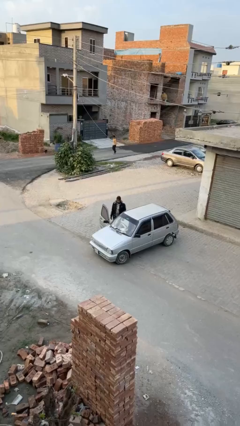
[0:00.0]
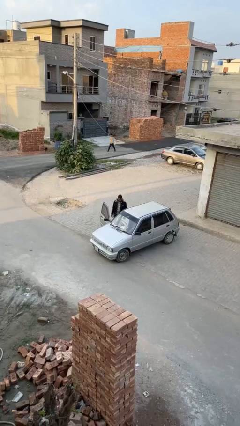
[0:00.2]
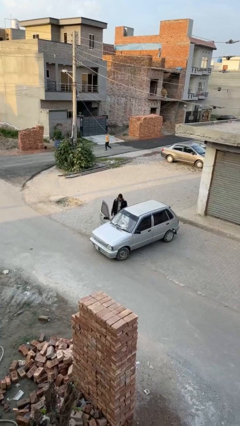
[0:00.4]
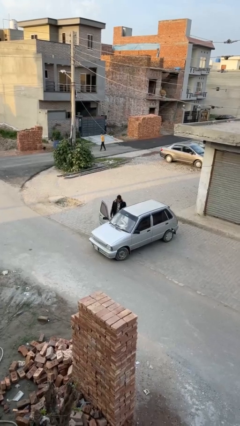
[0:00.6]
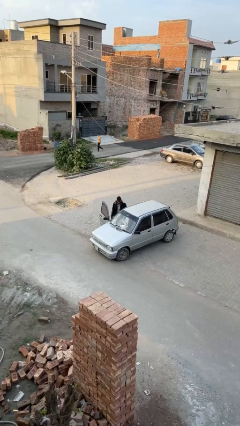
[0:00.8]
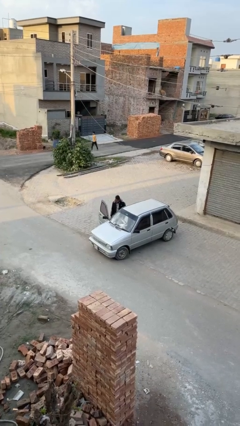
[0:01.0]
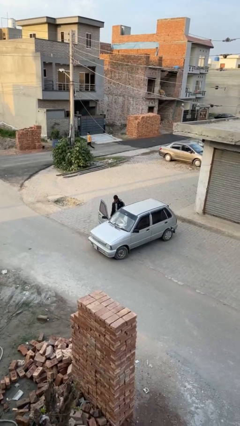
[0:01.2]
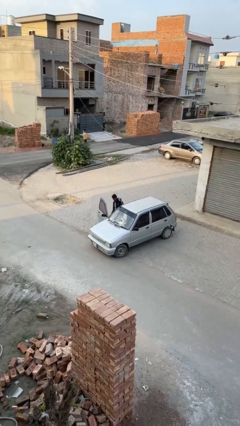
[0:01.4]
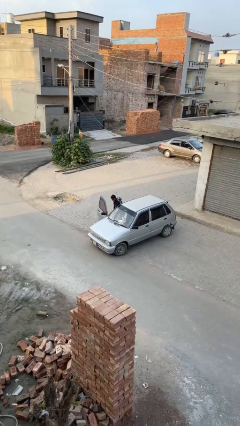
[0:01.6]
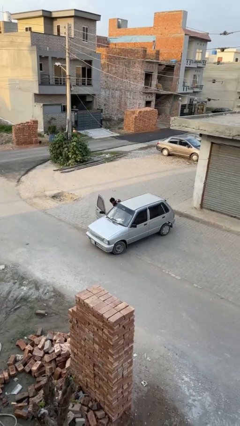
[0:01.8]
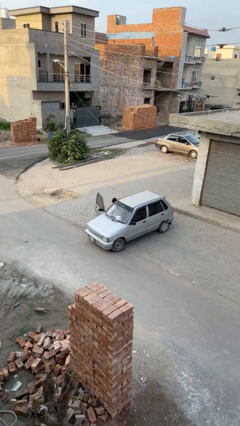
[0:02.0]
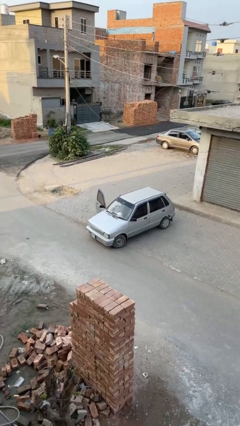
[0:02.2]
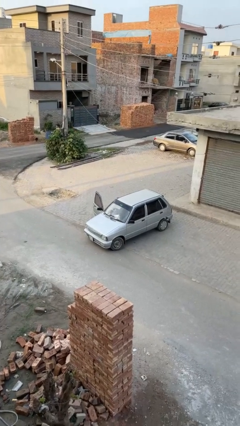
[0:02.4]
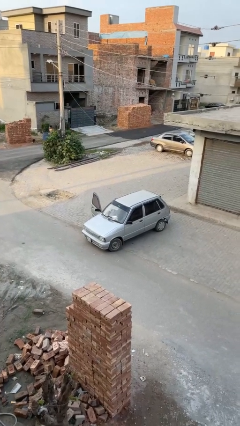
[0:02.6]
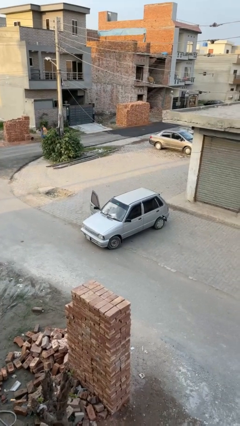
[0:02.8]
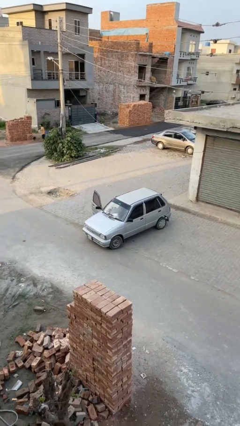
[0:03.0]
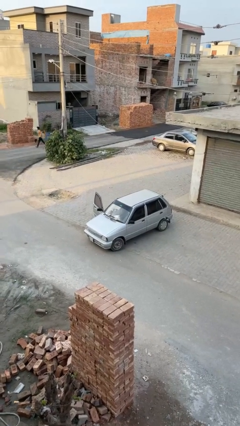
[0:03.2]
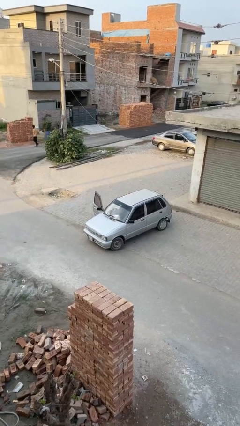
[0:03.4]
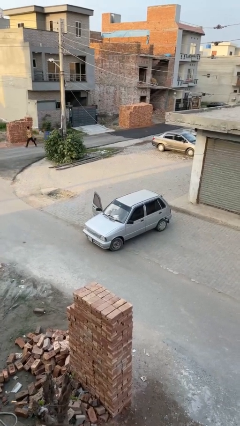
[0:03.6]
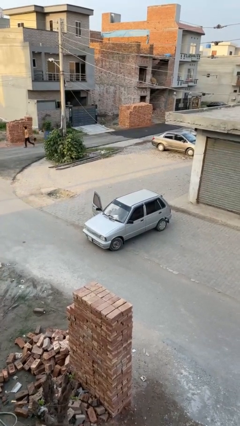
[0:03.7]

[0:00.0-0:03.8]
person enters car

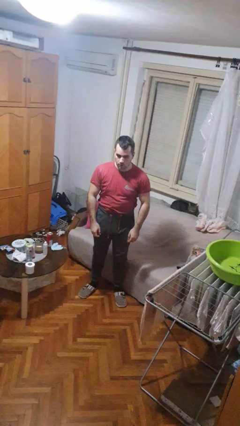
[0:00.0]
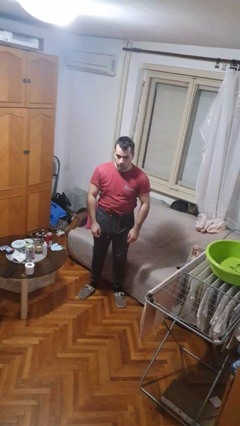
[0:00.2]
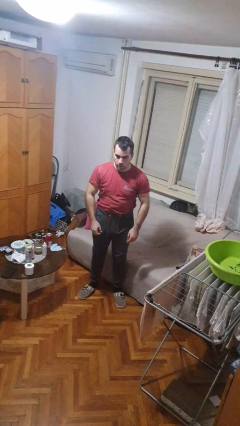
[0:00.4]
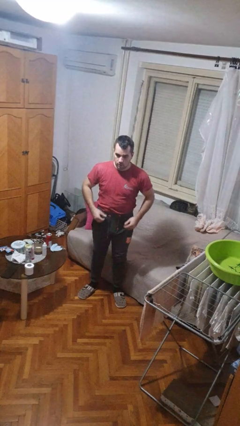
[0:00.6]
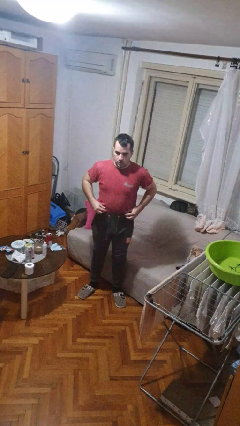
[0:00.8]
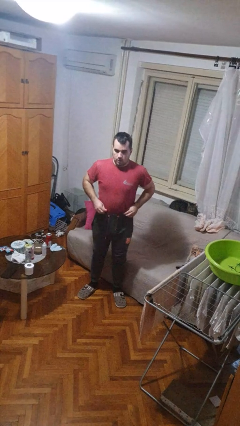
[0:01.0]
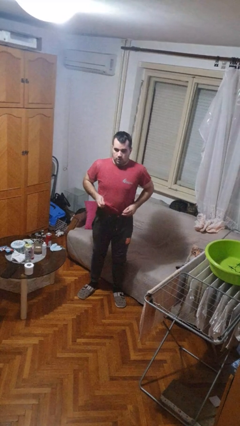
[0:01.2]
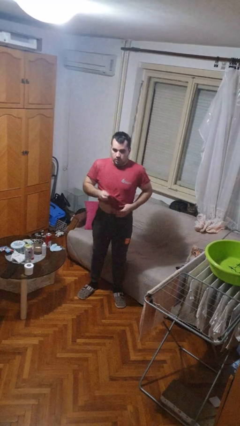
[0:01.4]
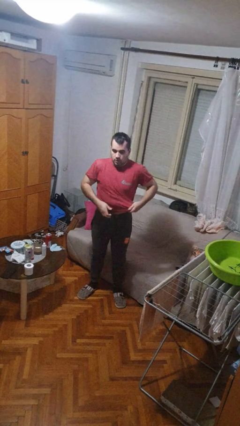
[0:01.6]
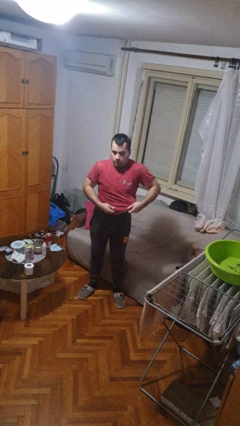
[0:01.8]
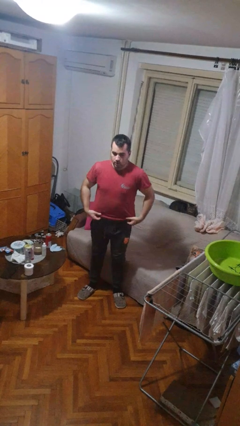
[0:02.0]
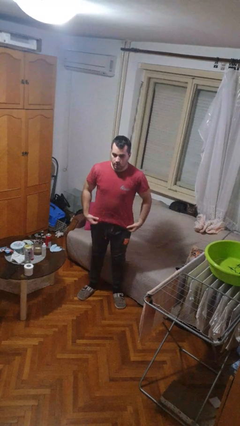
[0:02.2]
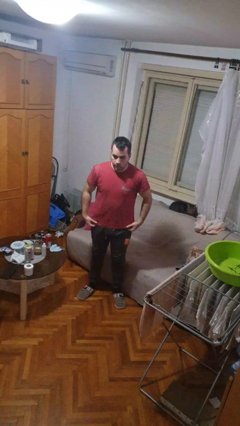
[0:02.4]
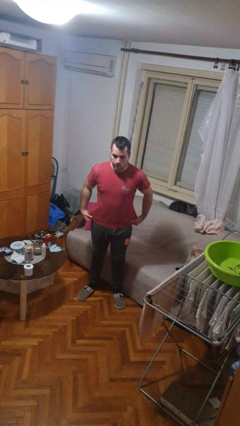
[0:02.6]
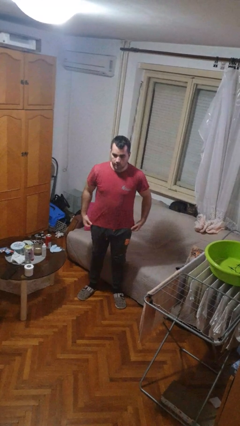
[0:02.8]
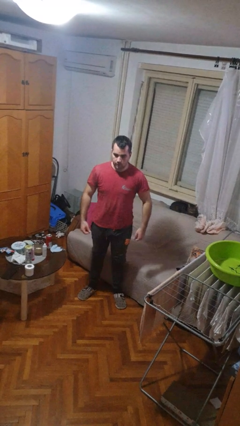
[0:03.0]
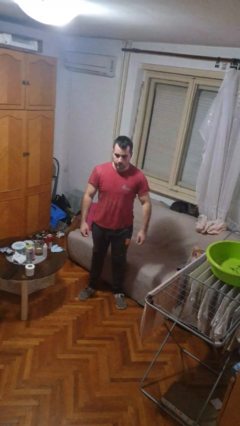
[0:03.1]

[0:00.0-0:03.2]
person untucks shirt

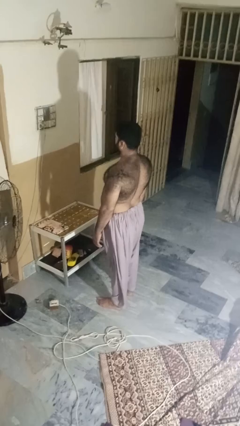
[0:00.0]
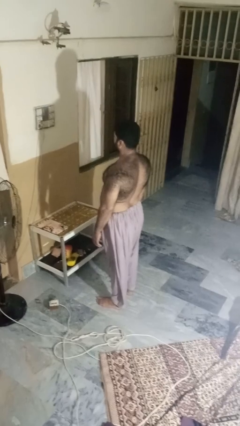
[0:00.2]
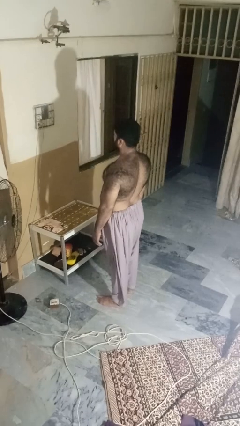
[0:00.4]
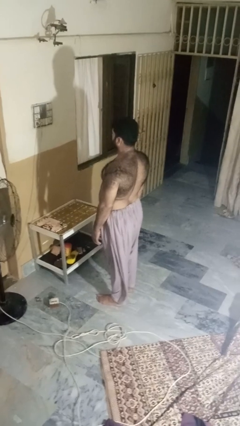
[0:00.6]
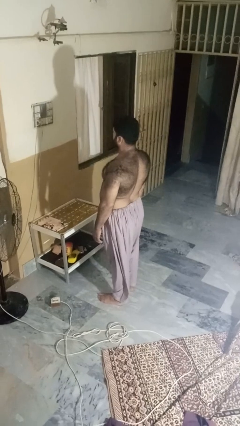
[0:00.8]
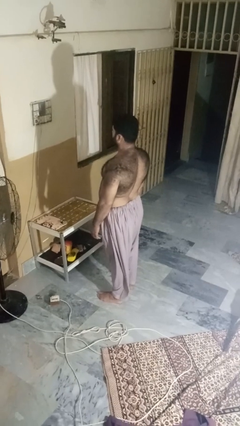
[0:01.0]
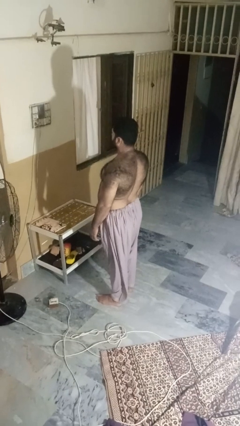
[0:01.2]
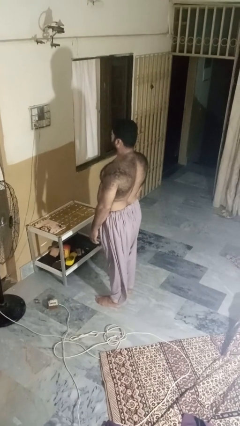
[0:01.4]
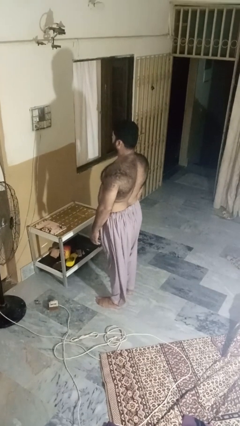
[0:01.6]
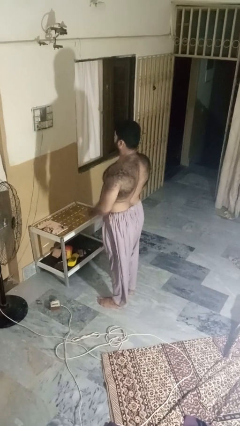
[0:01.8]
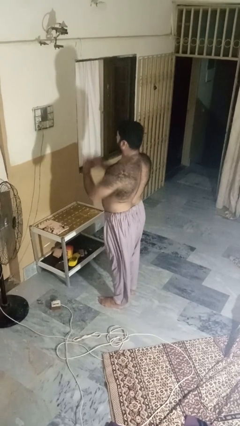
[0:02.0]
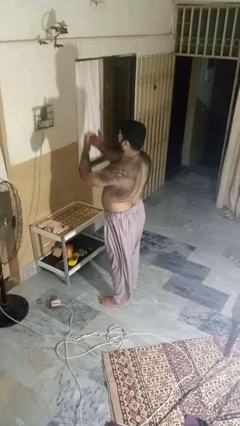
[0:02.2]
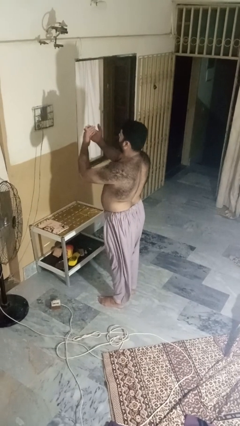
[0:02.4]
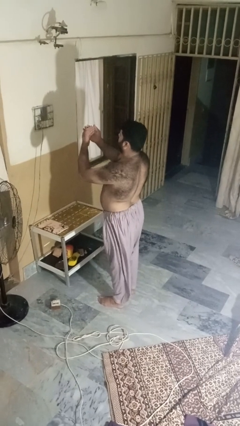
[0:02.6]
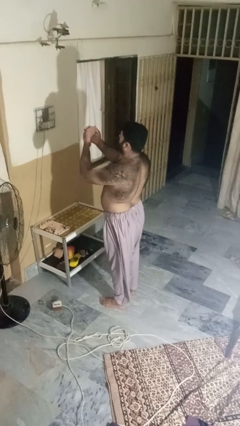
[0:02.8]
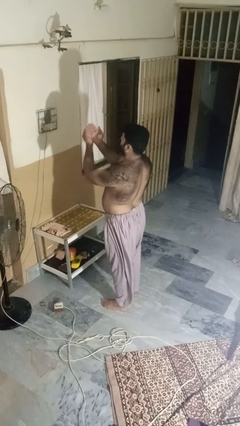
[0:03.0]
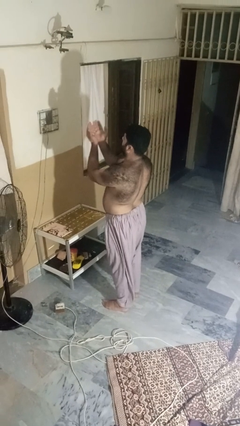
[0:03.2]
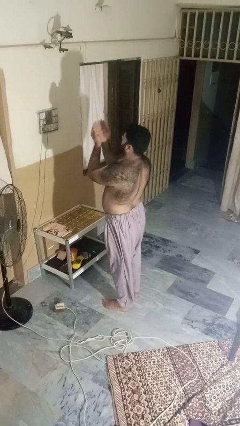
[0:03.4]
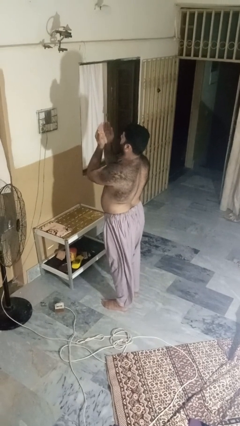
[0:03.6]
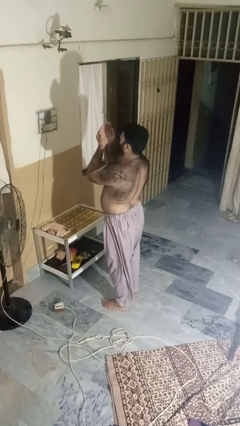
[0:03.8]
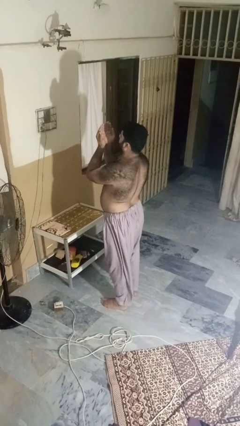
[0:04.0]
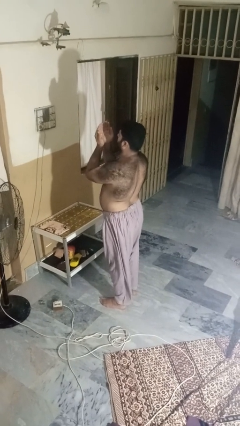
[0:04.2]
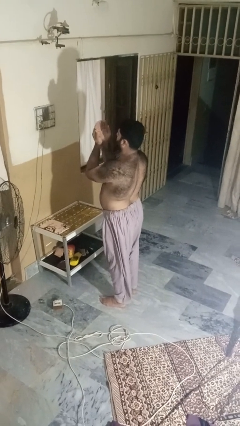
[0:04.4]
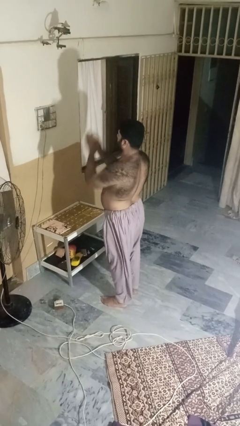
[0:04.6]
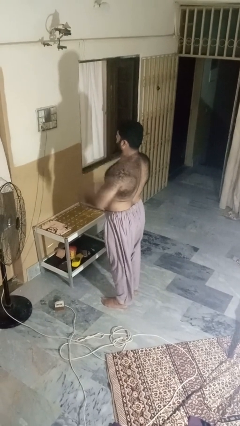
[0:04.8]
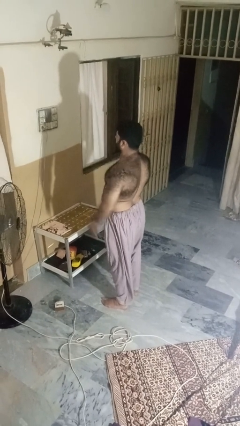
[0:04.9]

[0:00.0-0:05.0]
person prays

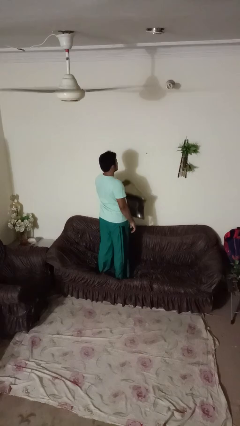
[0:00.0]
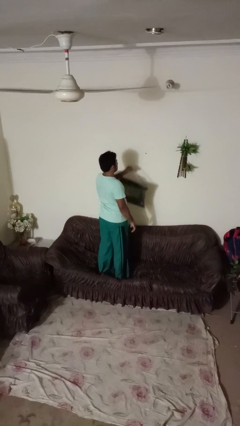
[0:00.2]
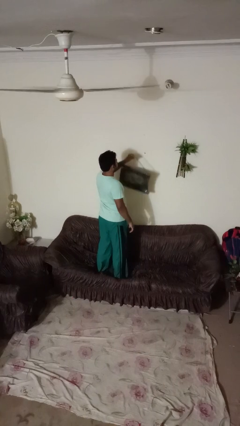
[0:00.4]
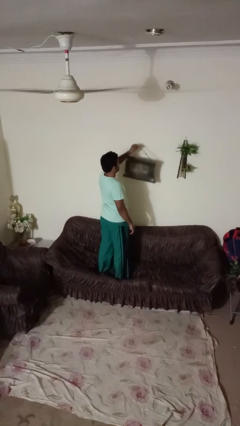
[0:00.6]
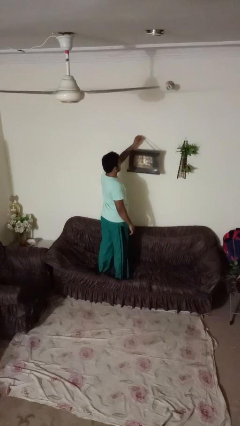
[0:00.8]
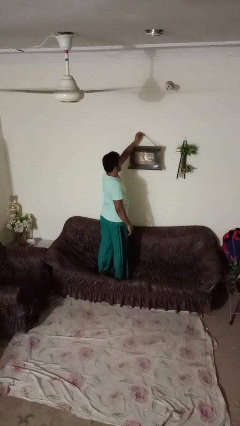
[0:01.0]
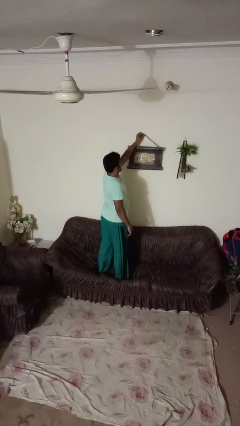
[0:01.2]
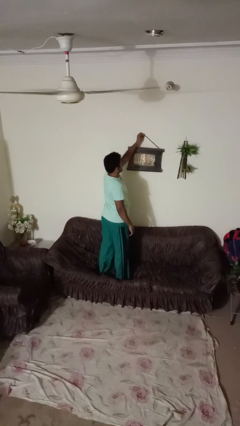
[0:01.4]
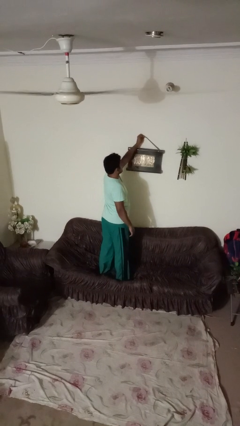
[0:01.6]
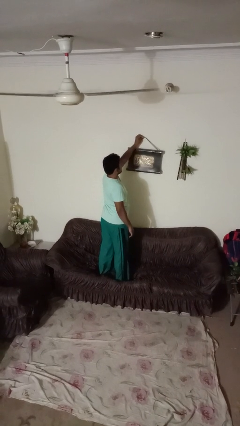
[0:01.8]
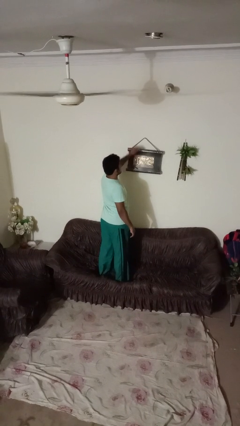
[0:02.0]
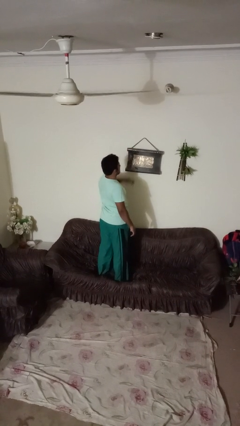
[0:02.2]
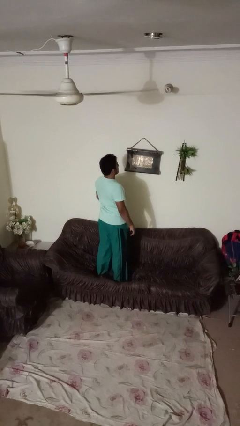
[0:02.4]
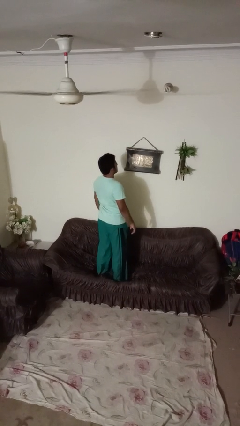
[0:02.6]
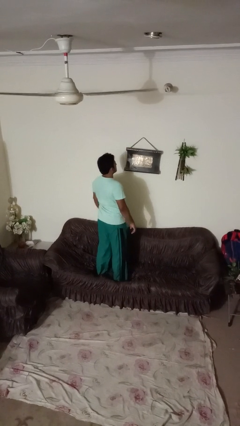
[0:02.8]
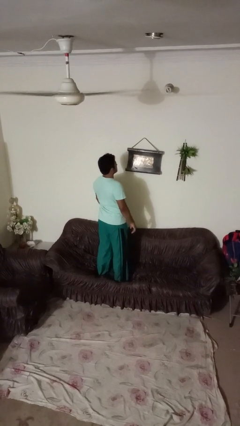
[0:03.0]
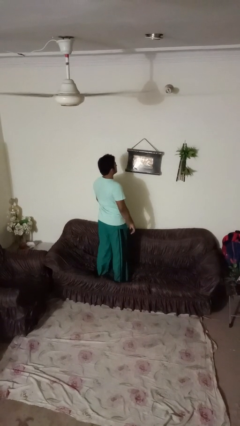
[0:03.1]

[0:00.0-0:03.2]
person puts up picture frame

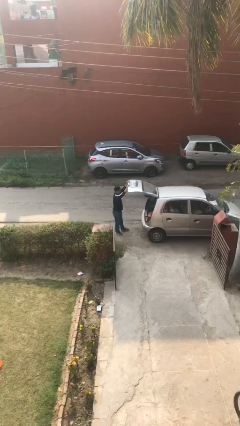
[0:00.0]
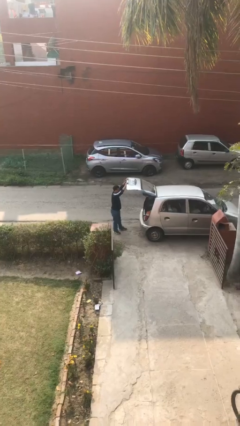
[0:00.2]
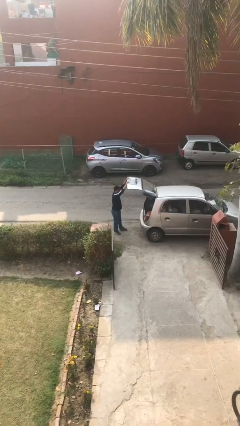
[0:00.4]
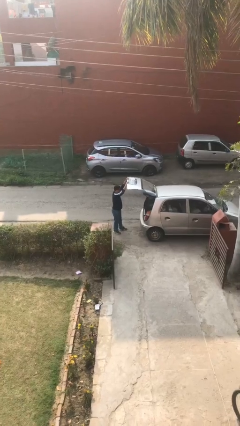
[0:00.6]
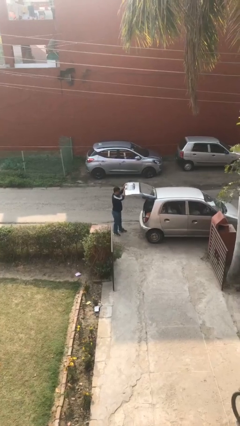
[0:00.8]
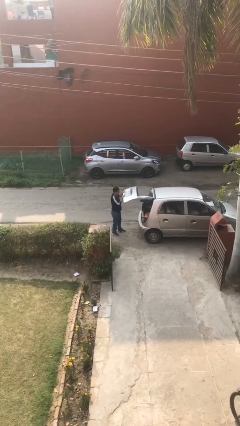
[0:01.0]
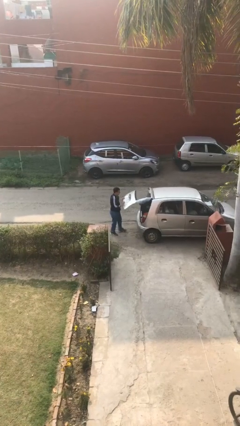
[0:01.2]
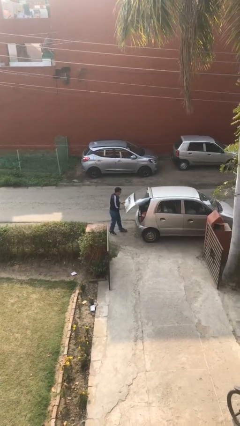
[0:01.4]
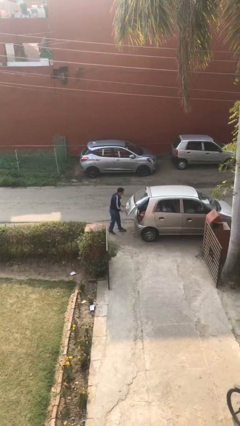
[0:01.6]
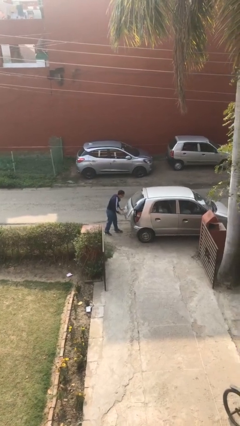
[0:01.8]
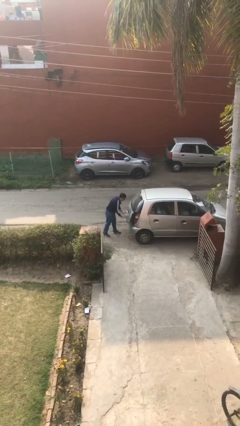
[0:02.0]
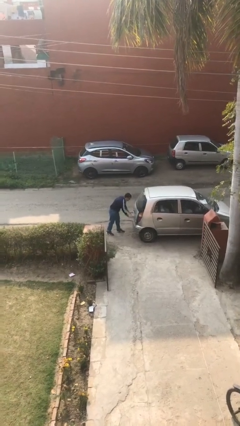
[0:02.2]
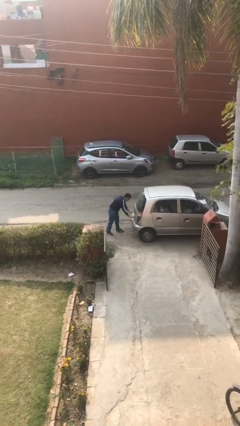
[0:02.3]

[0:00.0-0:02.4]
person closes car trunk
